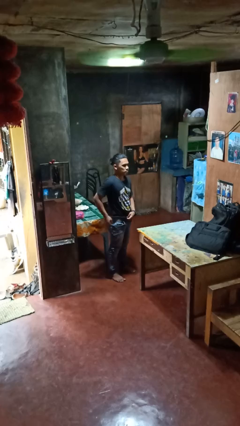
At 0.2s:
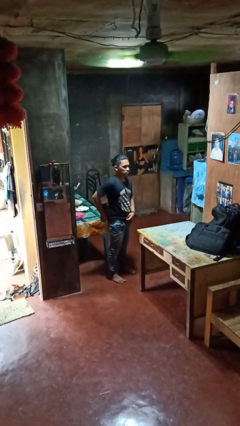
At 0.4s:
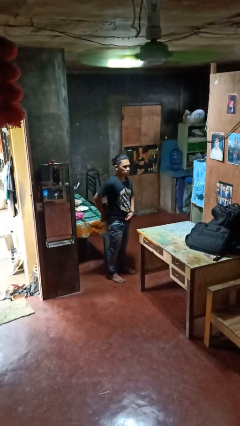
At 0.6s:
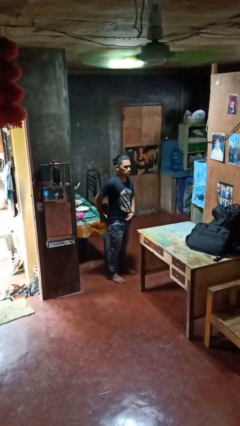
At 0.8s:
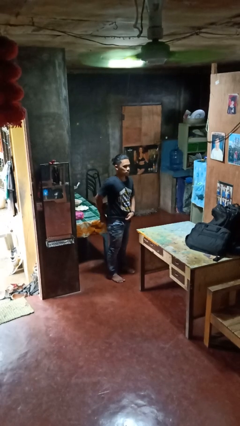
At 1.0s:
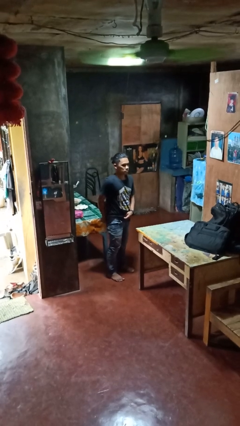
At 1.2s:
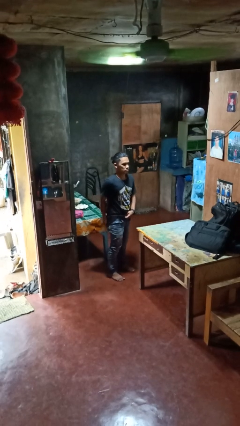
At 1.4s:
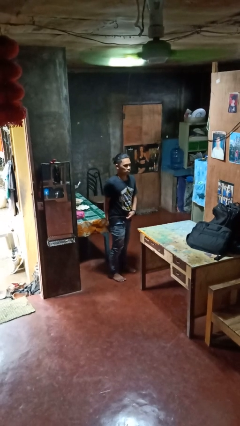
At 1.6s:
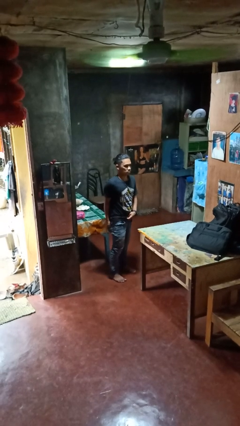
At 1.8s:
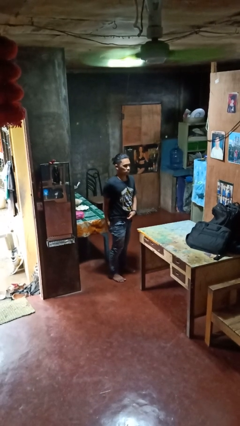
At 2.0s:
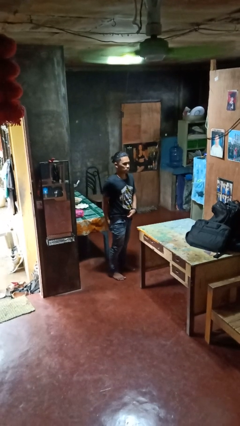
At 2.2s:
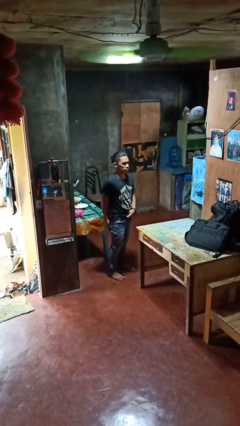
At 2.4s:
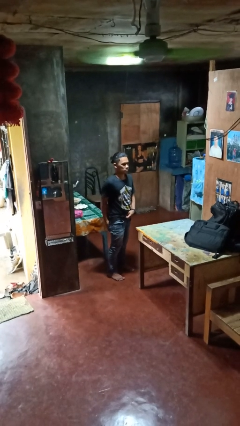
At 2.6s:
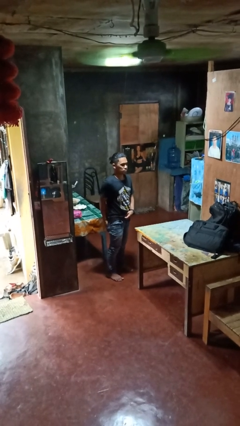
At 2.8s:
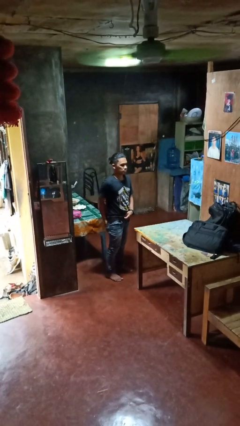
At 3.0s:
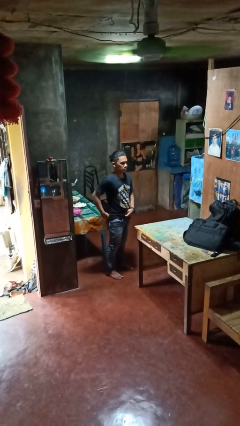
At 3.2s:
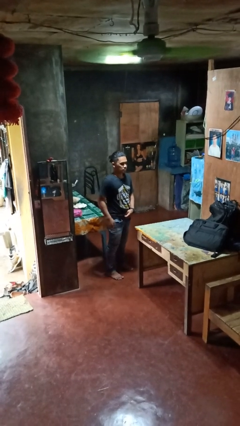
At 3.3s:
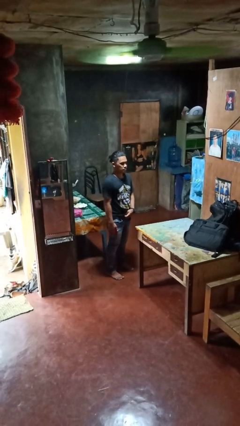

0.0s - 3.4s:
person puts hands in back pockets

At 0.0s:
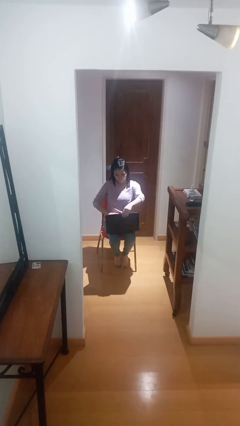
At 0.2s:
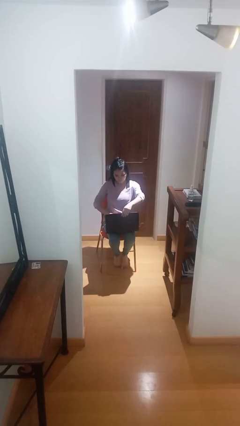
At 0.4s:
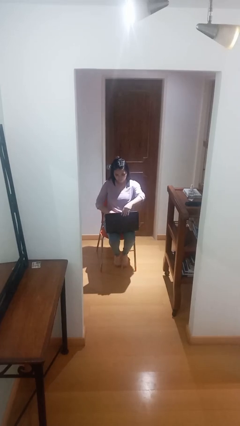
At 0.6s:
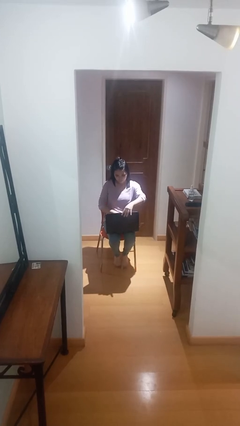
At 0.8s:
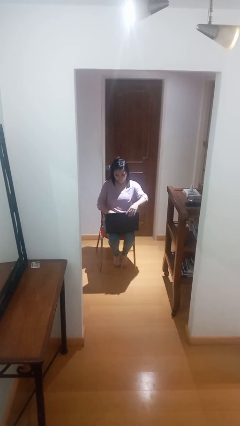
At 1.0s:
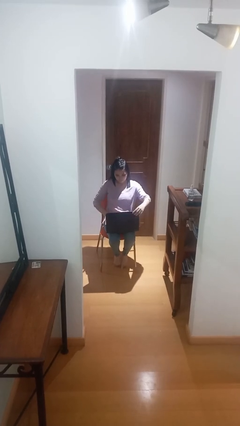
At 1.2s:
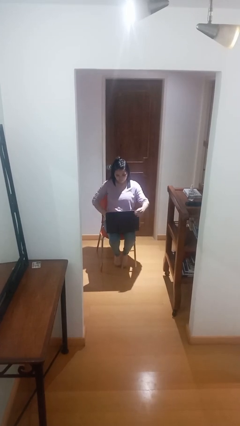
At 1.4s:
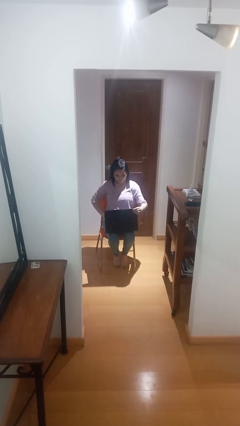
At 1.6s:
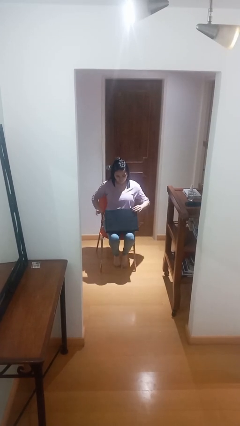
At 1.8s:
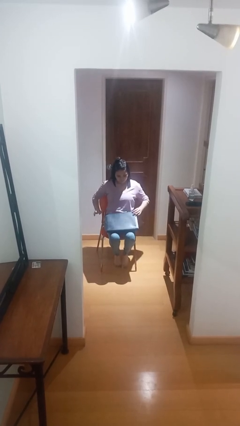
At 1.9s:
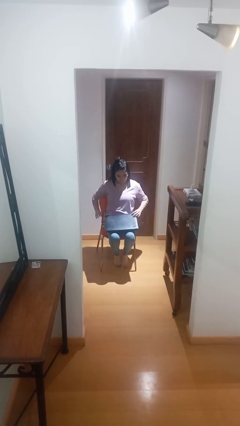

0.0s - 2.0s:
person interacts with laptop

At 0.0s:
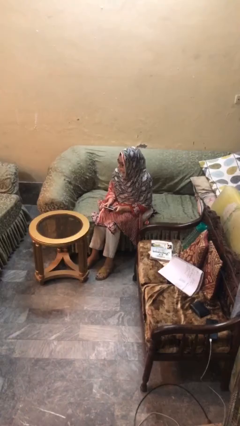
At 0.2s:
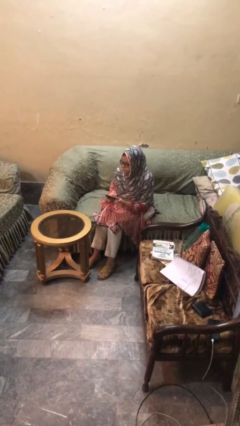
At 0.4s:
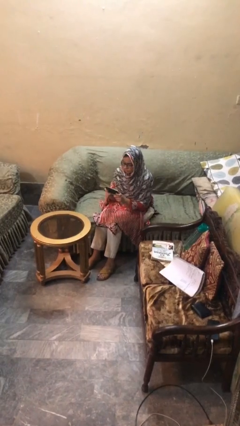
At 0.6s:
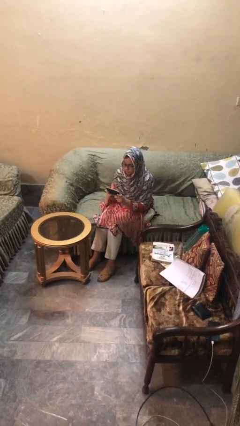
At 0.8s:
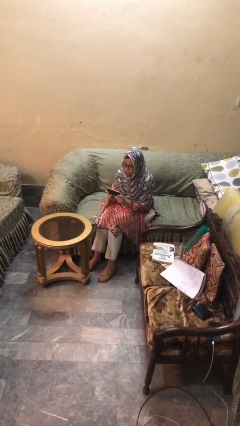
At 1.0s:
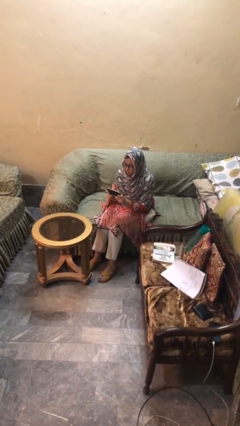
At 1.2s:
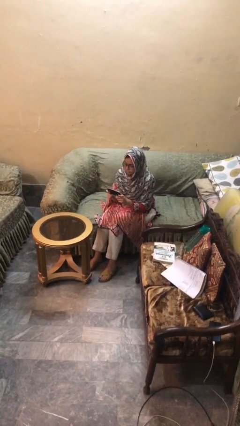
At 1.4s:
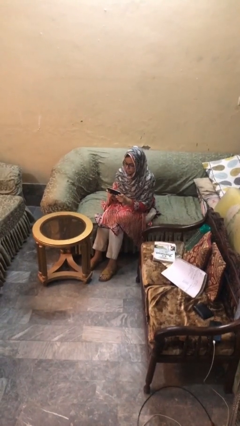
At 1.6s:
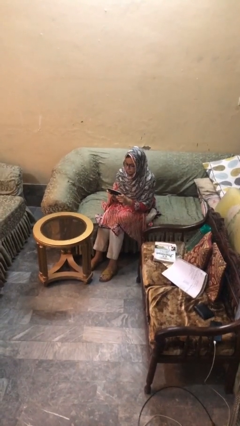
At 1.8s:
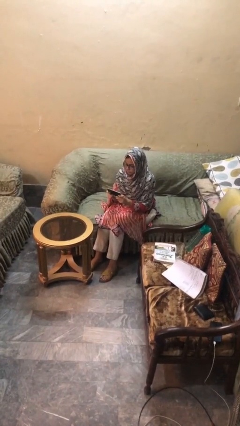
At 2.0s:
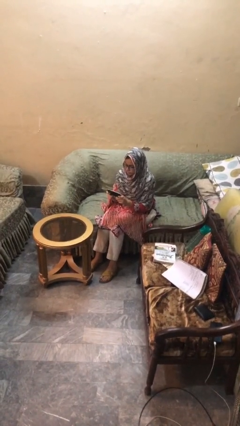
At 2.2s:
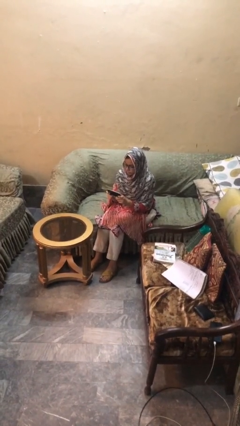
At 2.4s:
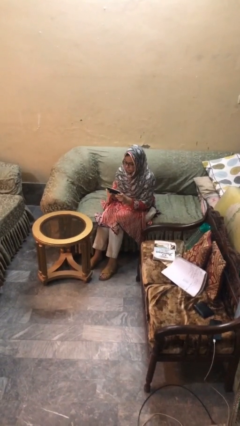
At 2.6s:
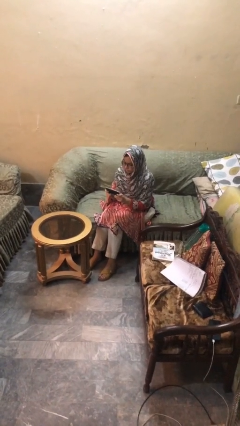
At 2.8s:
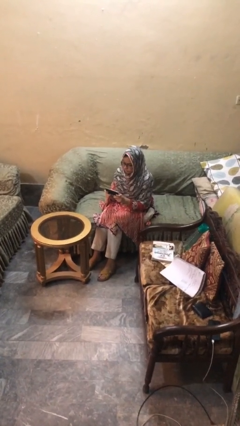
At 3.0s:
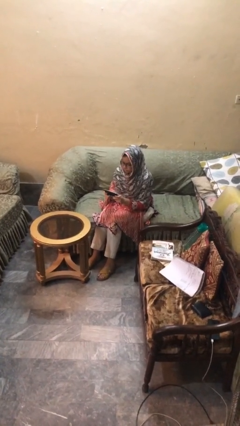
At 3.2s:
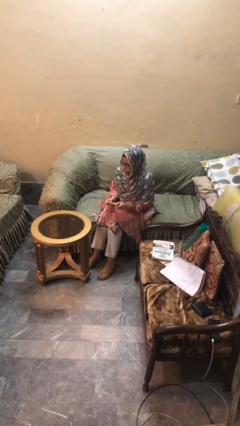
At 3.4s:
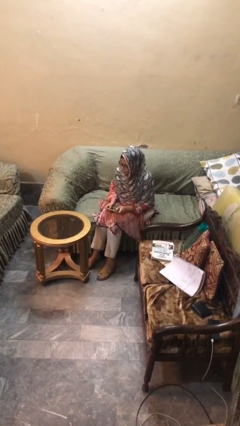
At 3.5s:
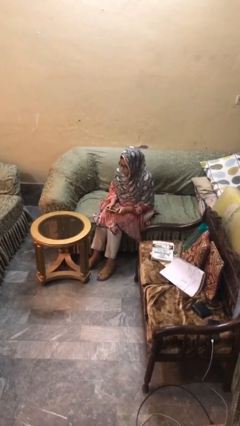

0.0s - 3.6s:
person interacts with handheld game

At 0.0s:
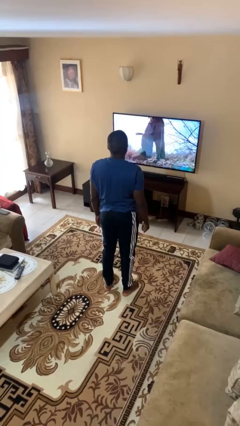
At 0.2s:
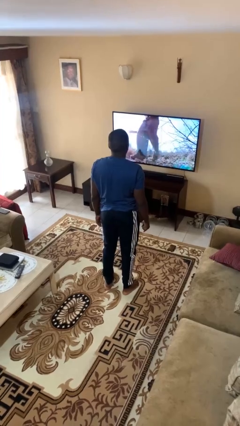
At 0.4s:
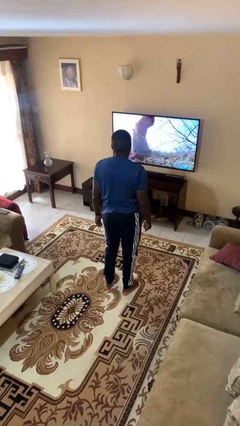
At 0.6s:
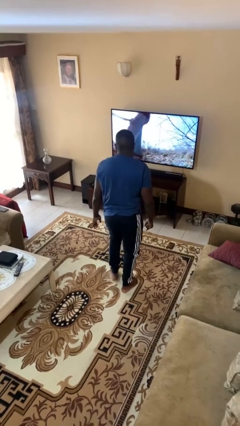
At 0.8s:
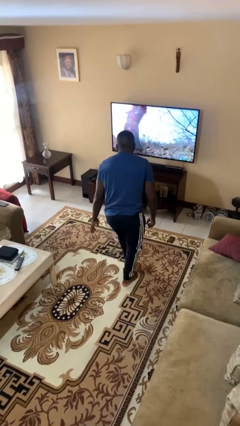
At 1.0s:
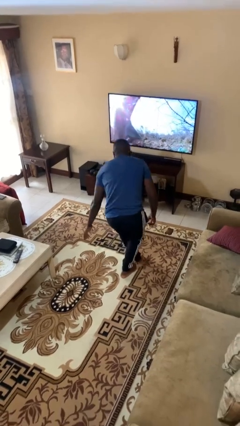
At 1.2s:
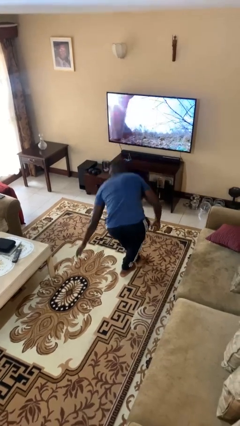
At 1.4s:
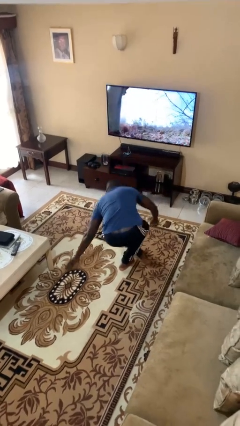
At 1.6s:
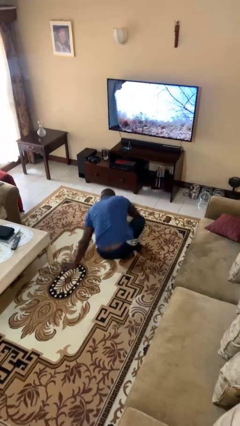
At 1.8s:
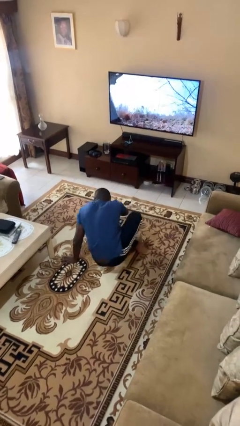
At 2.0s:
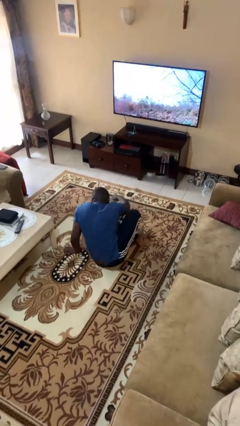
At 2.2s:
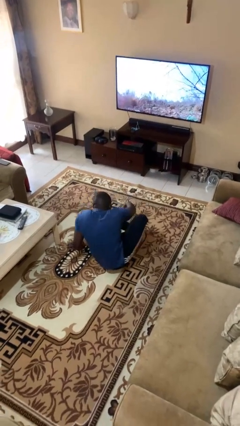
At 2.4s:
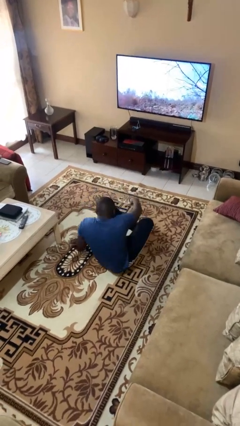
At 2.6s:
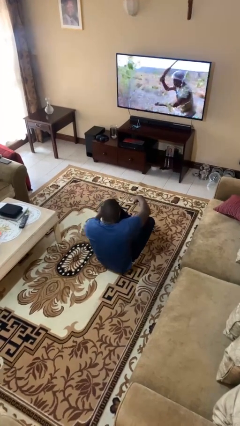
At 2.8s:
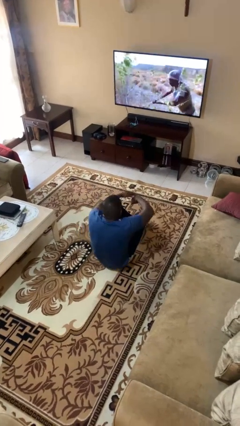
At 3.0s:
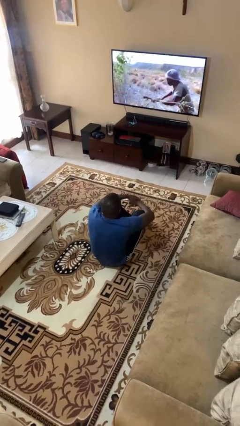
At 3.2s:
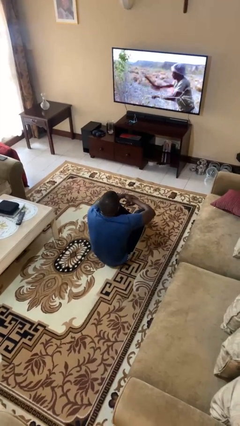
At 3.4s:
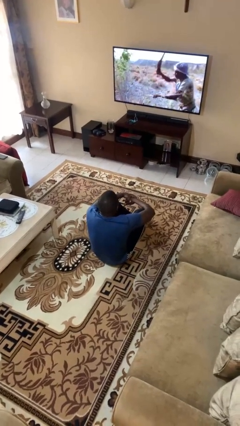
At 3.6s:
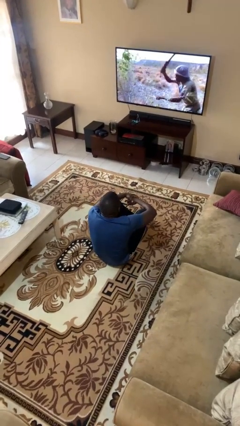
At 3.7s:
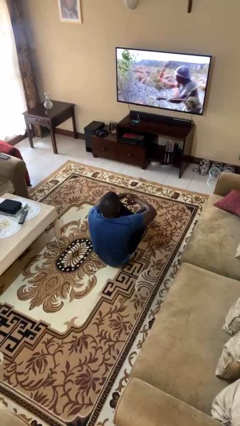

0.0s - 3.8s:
person sits crisscross

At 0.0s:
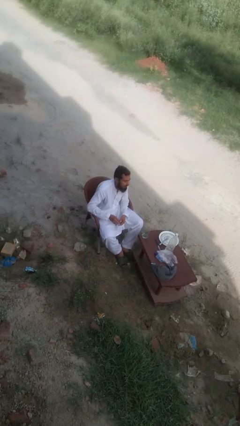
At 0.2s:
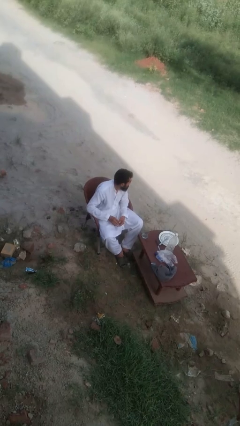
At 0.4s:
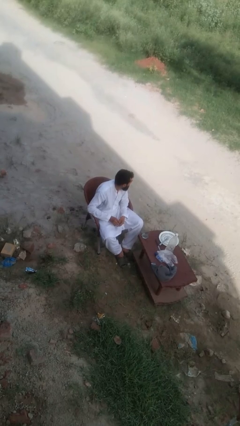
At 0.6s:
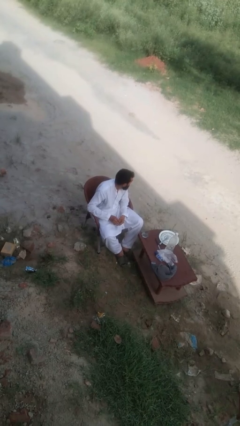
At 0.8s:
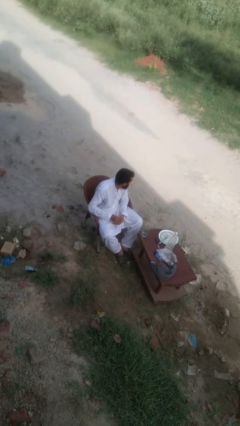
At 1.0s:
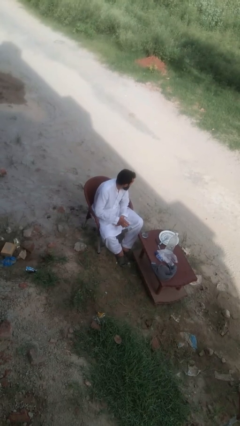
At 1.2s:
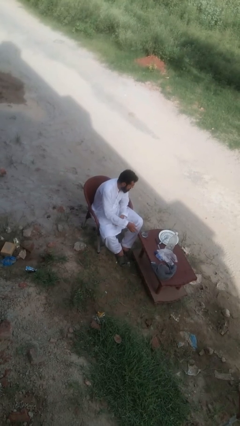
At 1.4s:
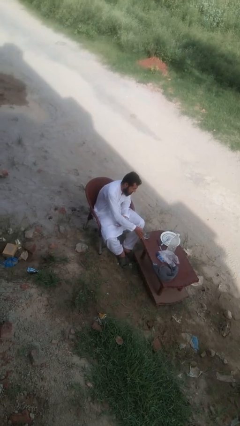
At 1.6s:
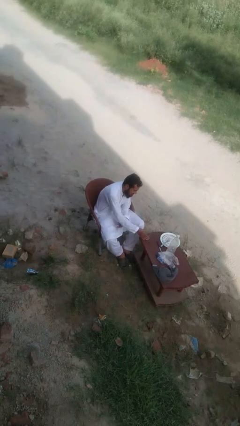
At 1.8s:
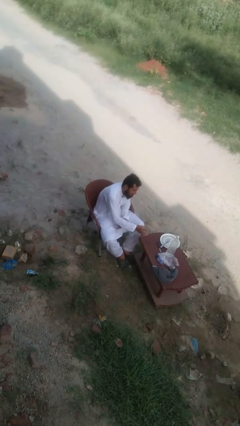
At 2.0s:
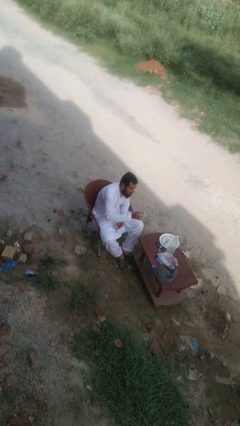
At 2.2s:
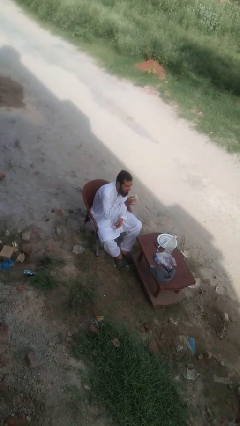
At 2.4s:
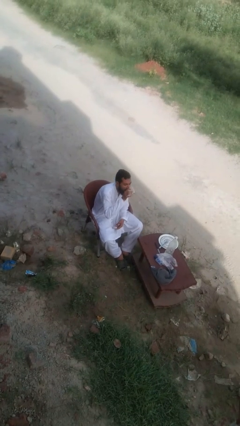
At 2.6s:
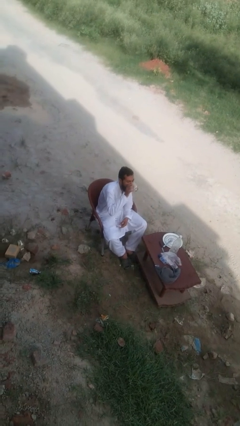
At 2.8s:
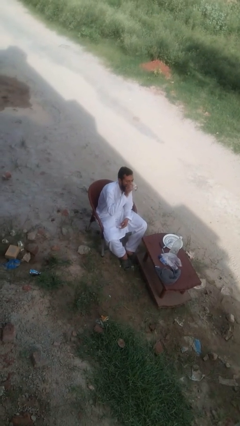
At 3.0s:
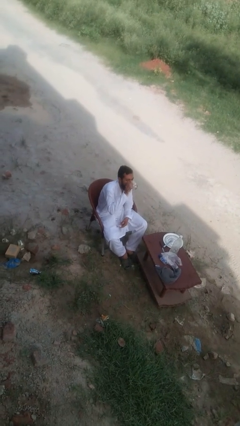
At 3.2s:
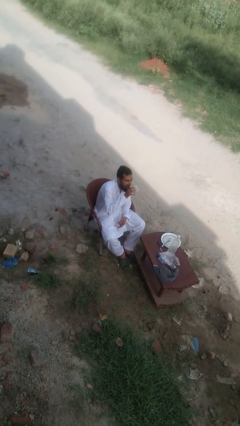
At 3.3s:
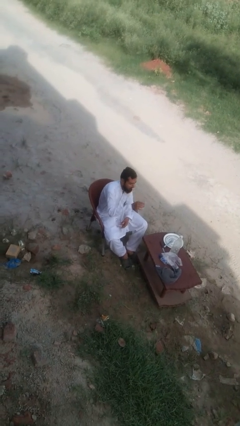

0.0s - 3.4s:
person drinks from cup

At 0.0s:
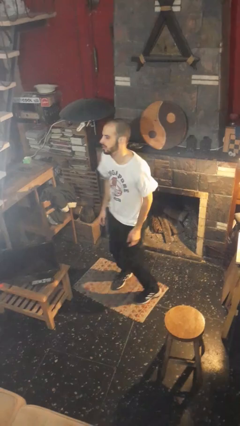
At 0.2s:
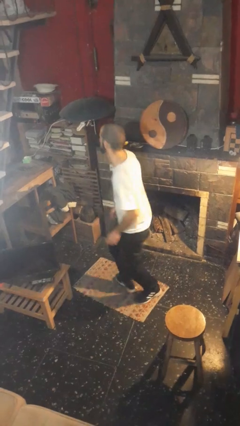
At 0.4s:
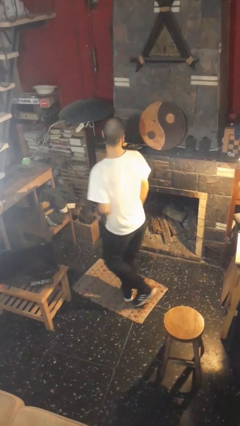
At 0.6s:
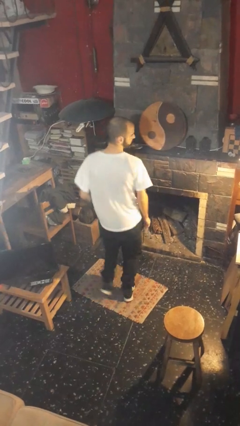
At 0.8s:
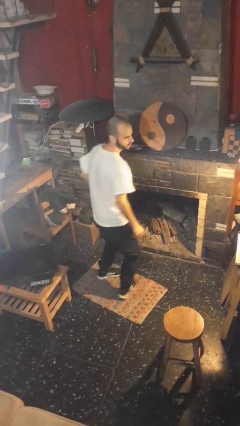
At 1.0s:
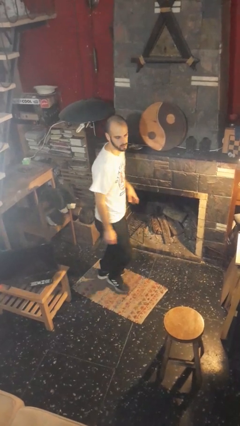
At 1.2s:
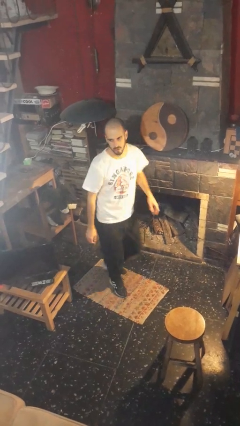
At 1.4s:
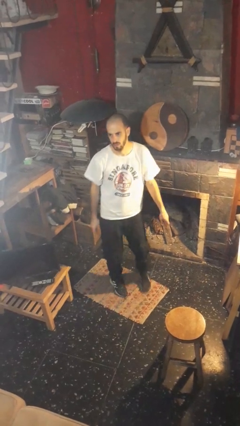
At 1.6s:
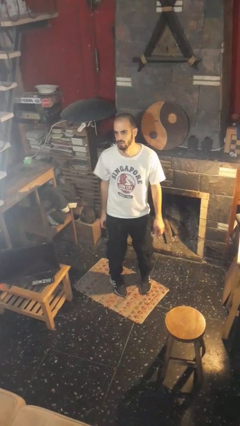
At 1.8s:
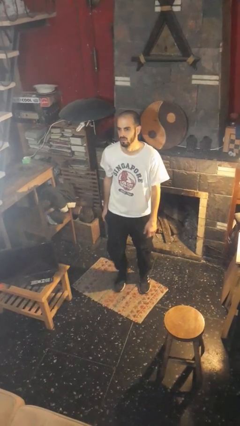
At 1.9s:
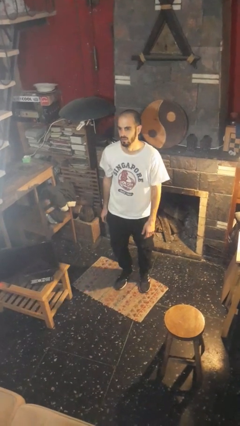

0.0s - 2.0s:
person twirls
